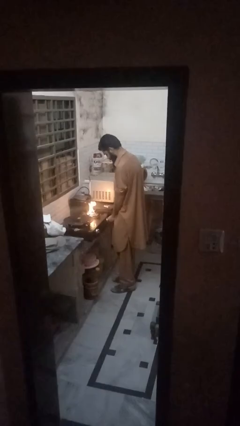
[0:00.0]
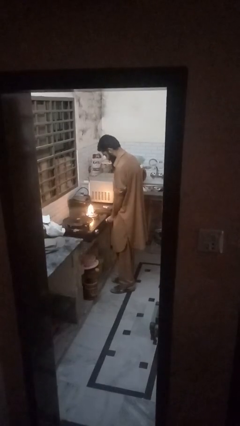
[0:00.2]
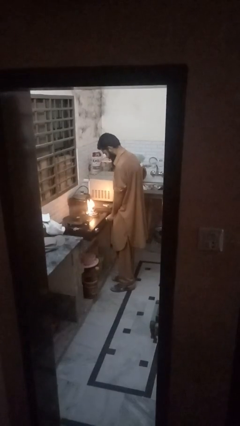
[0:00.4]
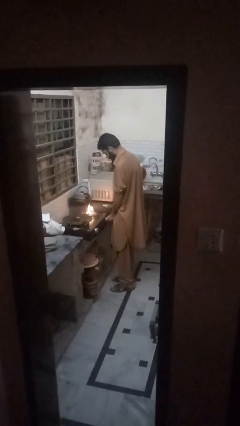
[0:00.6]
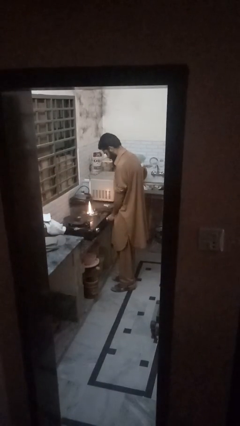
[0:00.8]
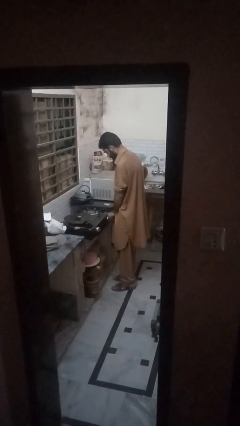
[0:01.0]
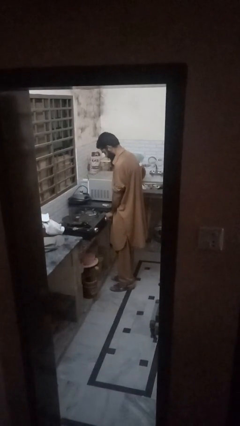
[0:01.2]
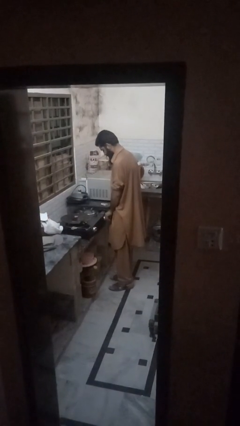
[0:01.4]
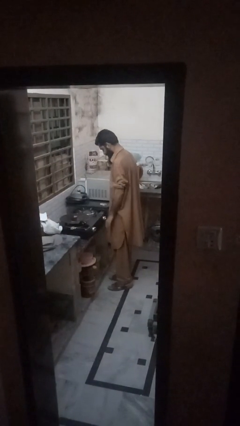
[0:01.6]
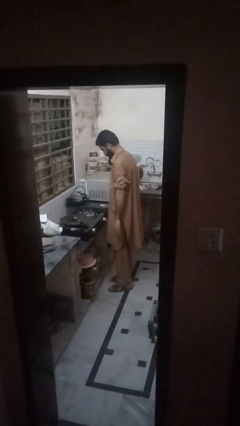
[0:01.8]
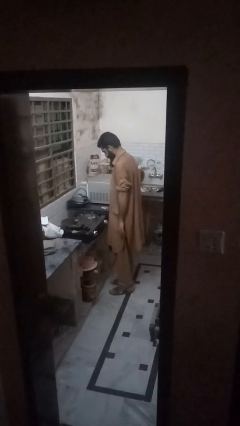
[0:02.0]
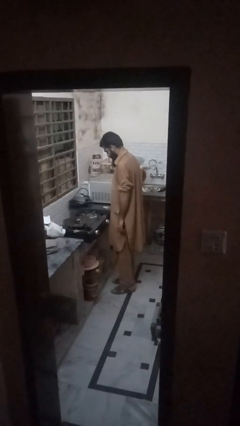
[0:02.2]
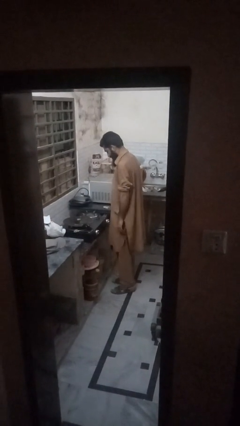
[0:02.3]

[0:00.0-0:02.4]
person turns off stovetop

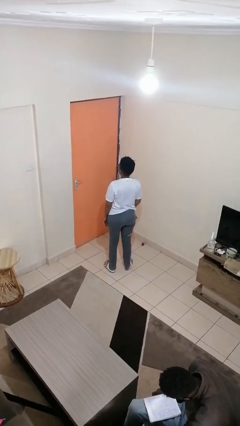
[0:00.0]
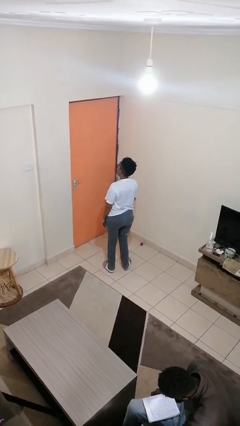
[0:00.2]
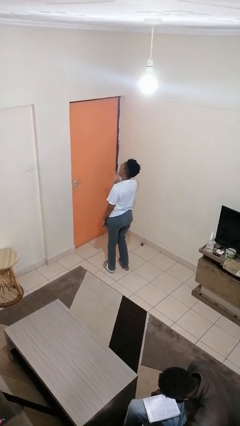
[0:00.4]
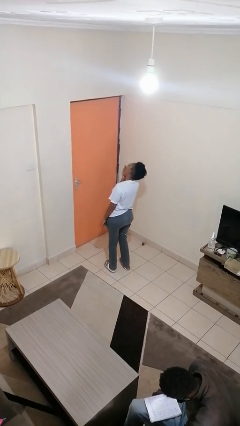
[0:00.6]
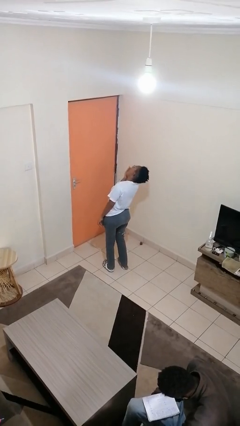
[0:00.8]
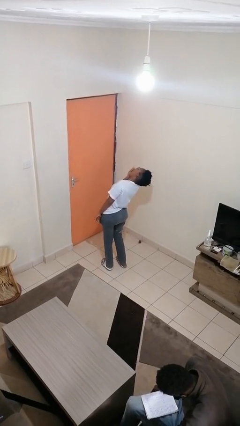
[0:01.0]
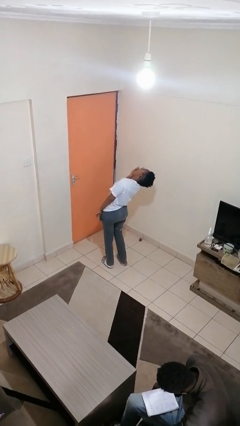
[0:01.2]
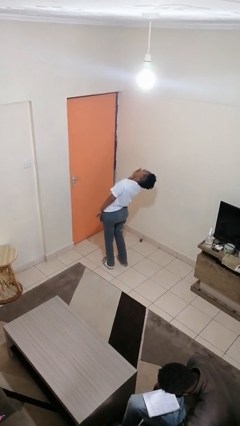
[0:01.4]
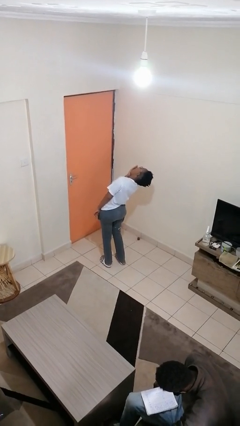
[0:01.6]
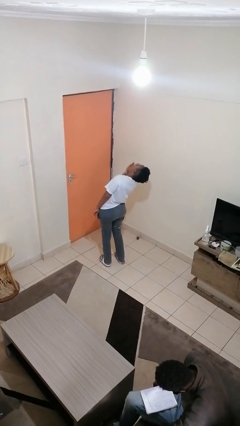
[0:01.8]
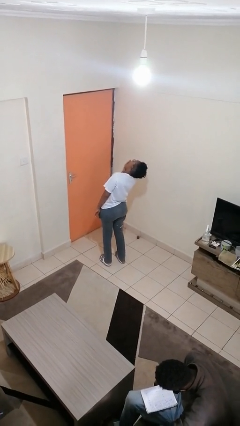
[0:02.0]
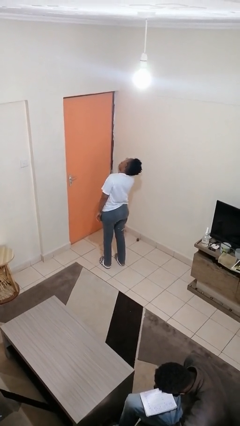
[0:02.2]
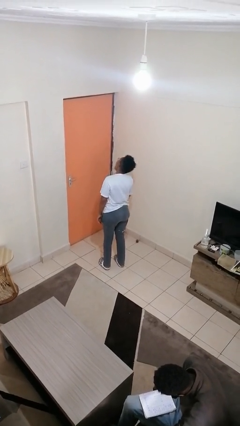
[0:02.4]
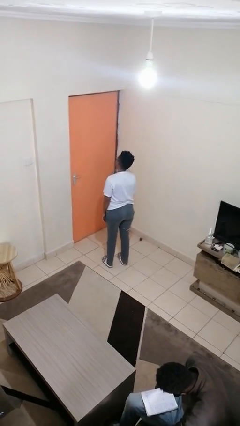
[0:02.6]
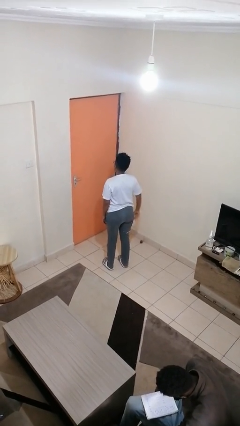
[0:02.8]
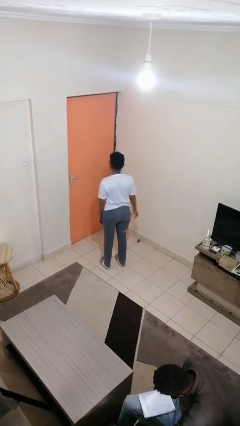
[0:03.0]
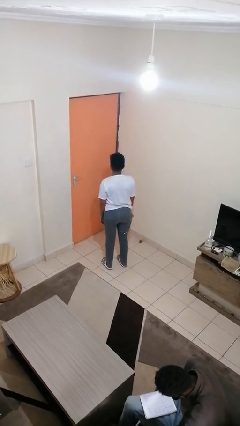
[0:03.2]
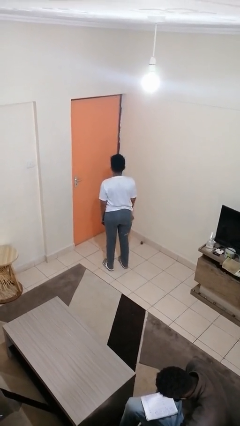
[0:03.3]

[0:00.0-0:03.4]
person yawns

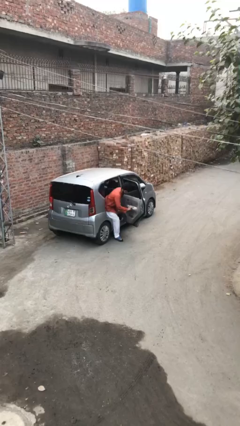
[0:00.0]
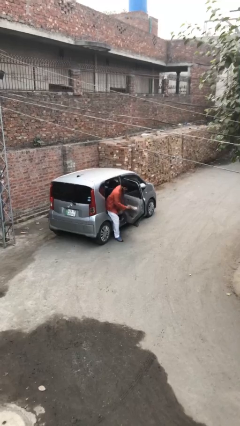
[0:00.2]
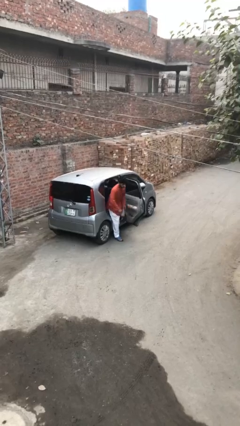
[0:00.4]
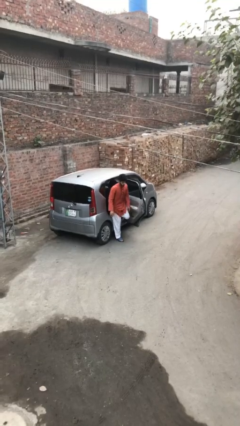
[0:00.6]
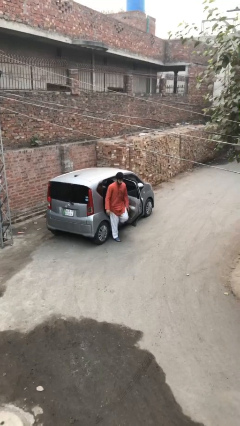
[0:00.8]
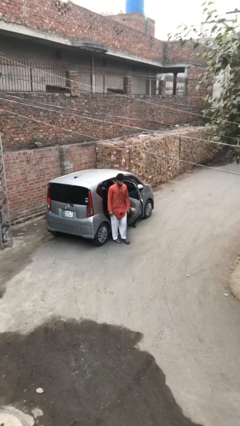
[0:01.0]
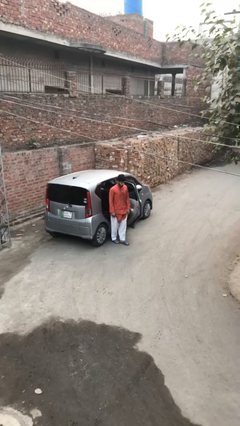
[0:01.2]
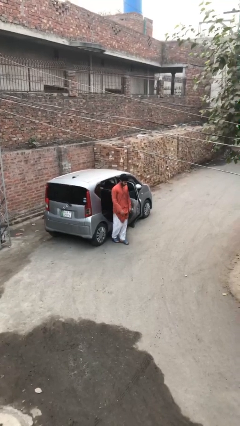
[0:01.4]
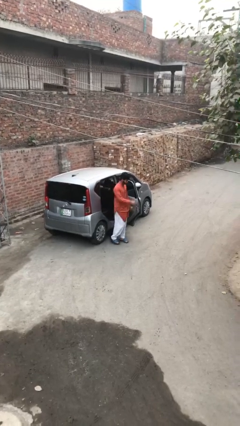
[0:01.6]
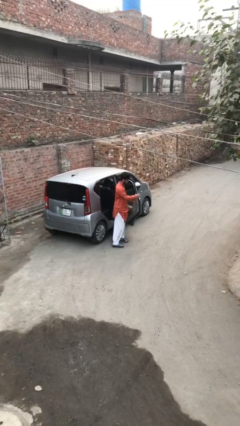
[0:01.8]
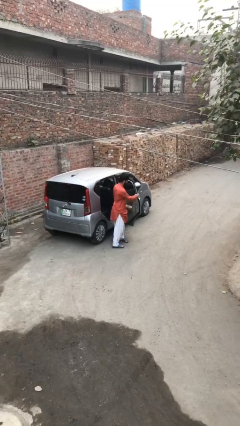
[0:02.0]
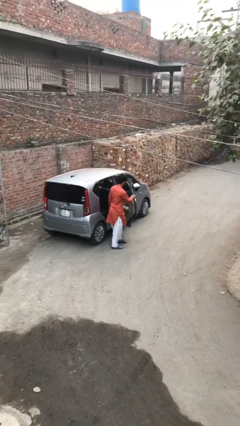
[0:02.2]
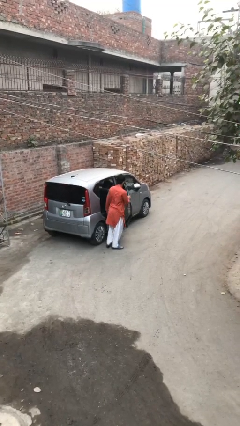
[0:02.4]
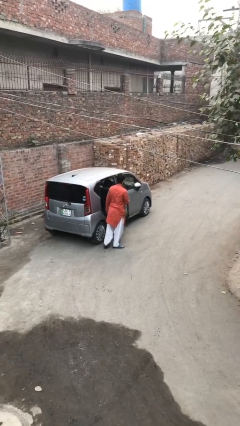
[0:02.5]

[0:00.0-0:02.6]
person exits car

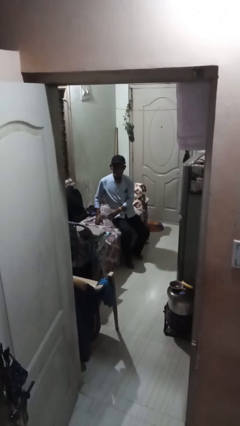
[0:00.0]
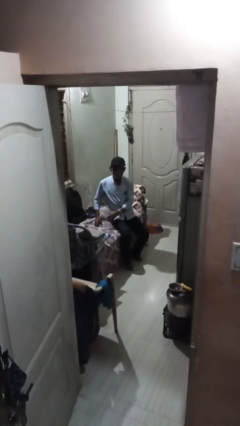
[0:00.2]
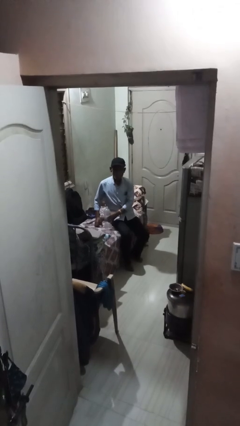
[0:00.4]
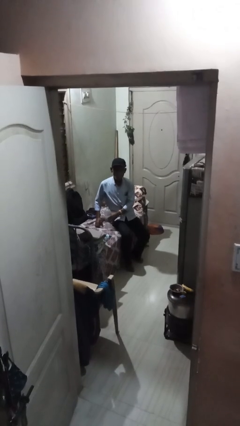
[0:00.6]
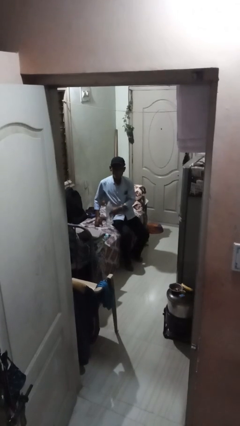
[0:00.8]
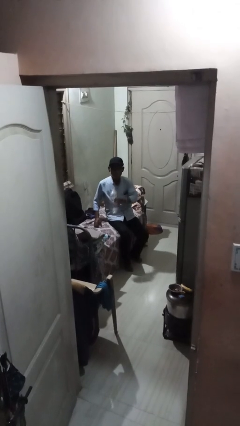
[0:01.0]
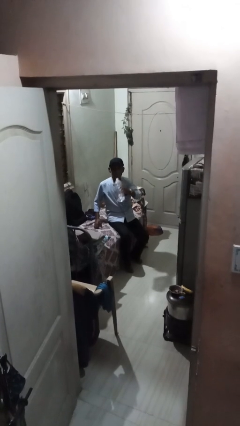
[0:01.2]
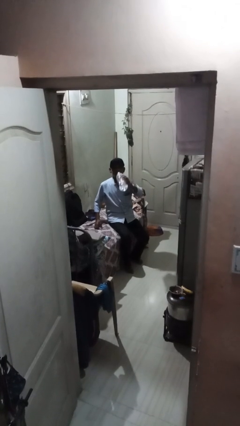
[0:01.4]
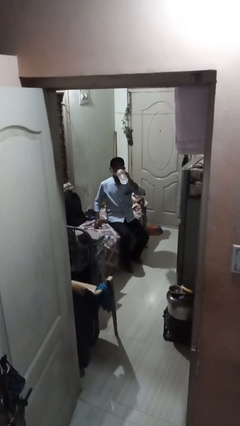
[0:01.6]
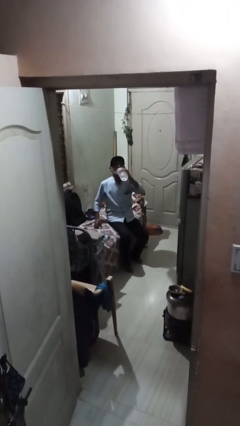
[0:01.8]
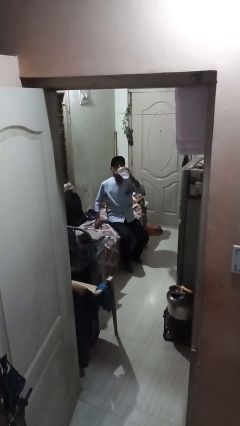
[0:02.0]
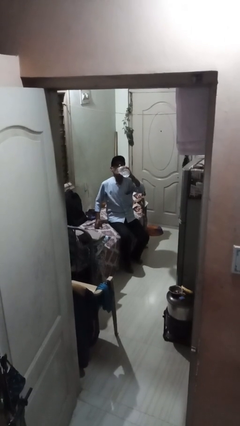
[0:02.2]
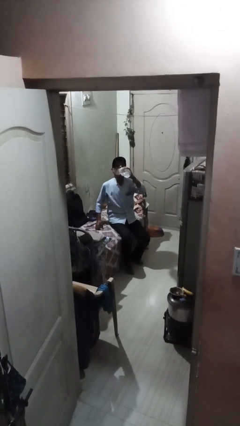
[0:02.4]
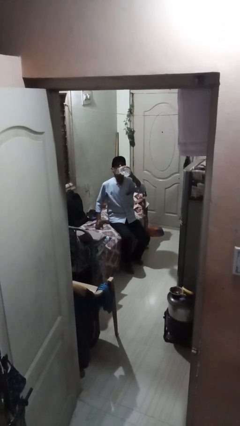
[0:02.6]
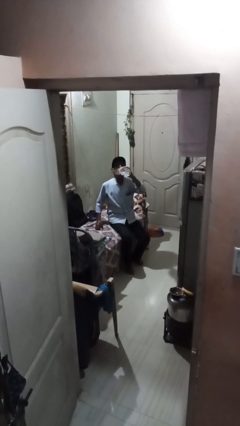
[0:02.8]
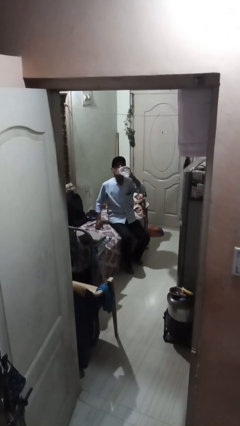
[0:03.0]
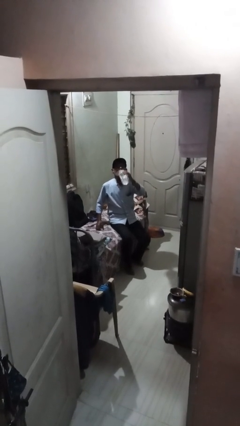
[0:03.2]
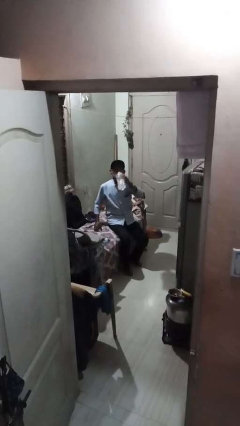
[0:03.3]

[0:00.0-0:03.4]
person drinks from bottle

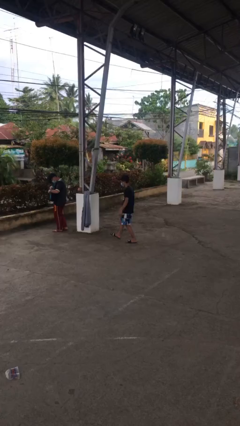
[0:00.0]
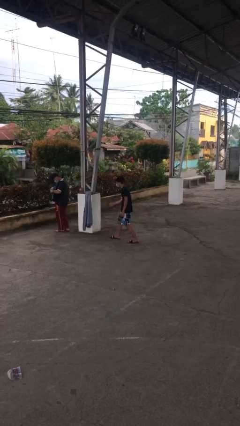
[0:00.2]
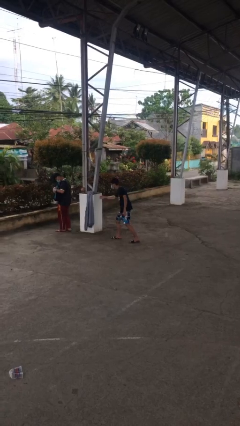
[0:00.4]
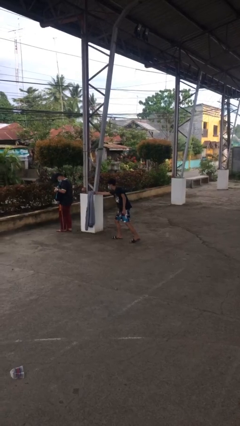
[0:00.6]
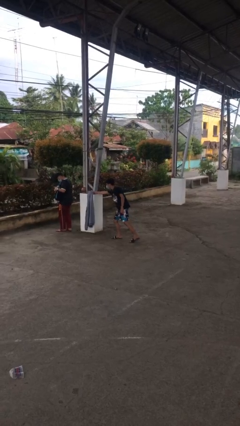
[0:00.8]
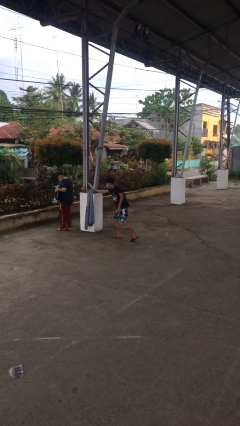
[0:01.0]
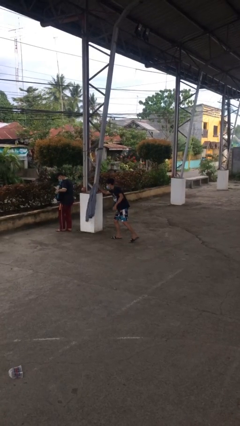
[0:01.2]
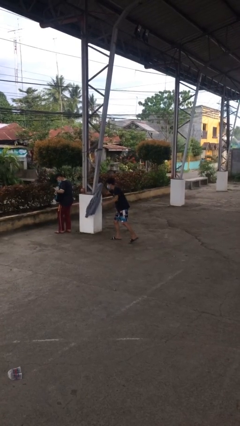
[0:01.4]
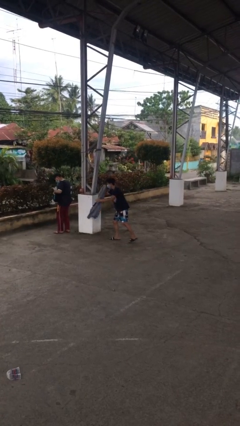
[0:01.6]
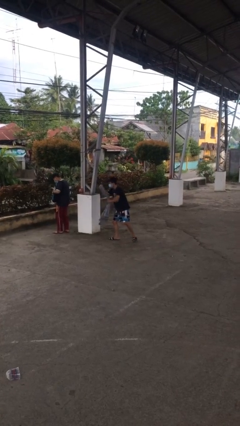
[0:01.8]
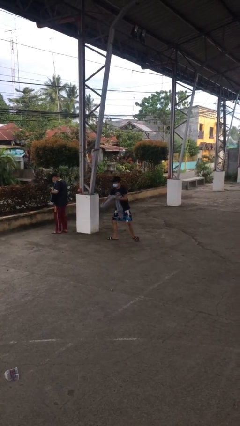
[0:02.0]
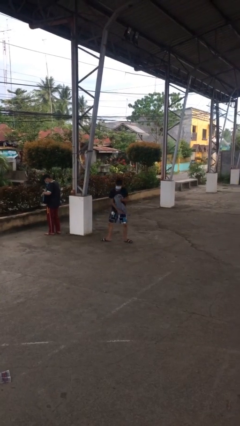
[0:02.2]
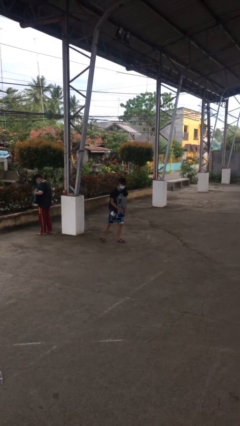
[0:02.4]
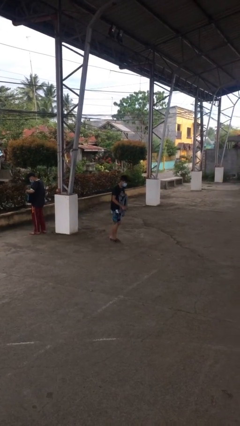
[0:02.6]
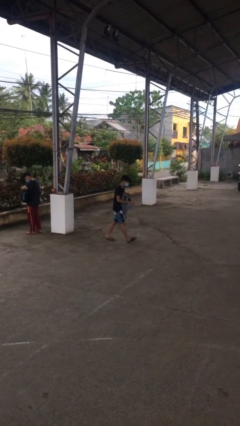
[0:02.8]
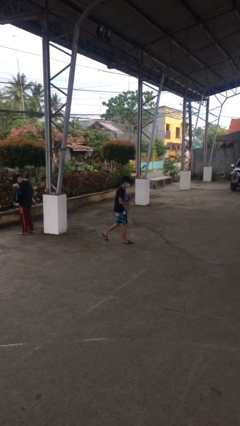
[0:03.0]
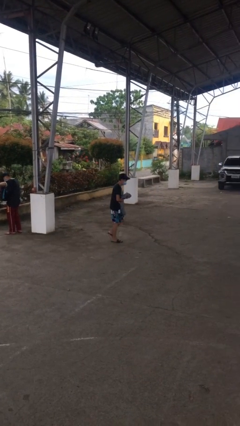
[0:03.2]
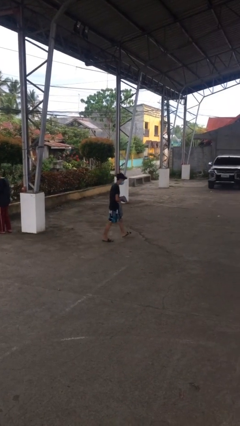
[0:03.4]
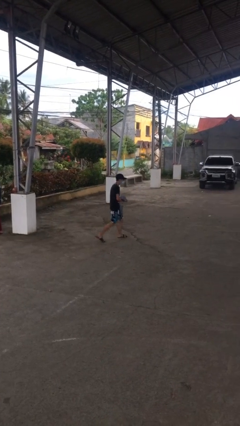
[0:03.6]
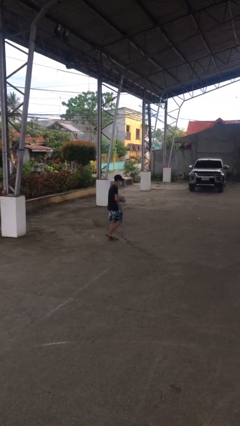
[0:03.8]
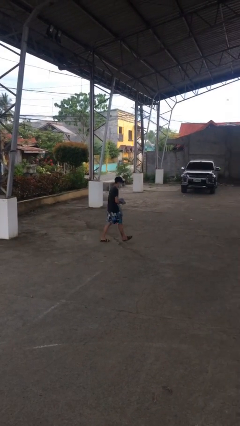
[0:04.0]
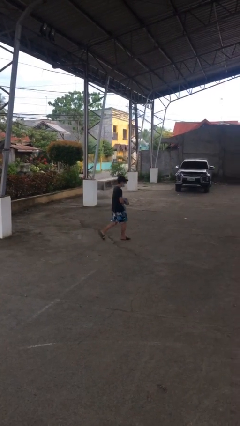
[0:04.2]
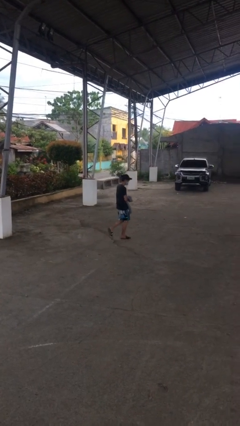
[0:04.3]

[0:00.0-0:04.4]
person steals object from person

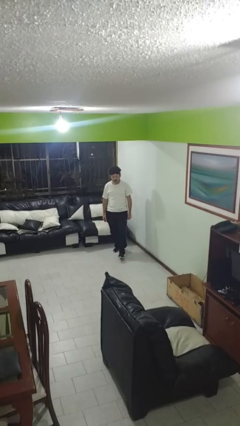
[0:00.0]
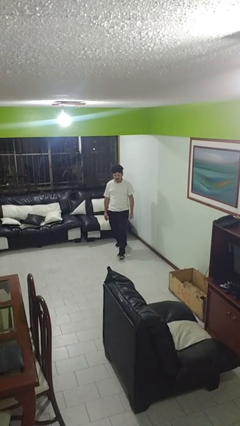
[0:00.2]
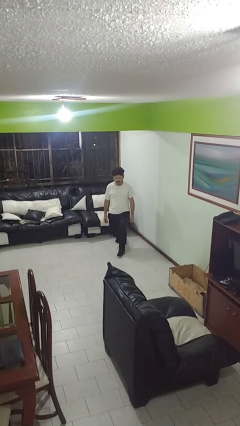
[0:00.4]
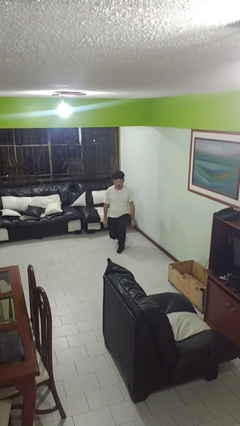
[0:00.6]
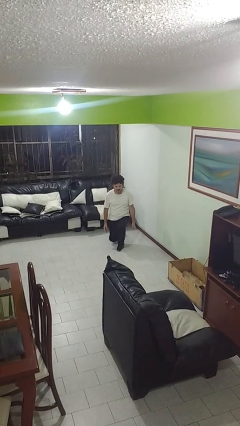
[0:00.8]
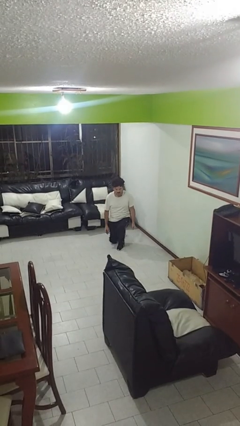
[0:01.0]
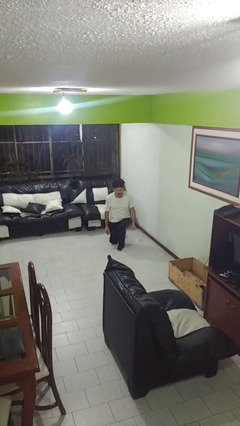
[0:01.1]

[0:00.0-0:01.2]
person kneels

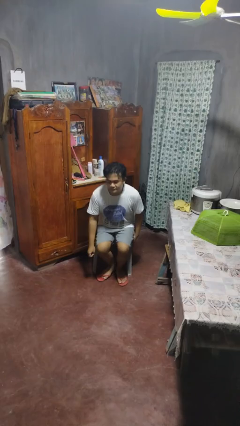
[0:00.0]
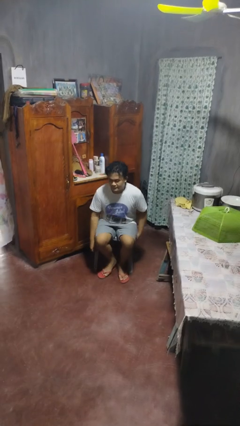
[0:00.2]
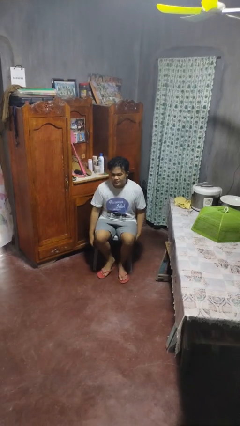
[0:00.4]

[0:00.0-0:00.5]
person sits down
